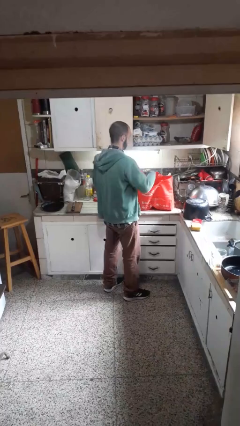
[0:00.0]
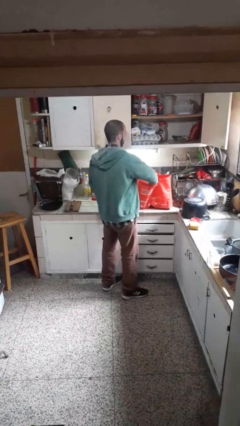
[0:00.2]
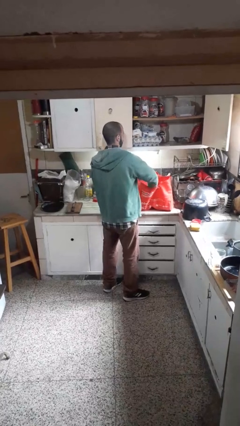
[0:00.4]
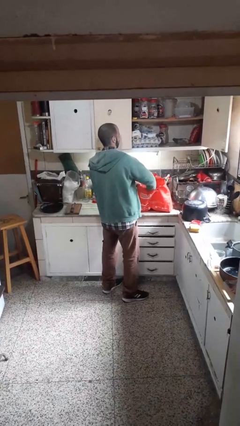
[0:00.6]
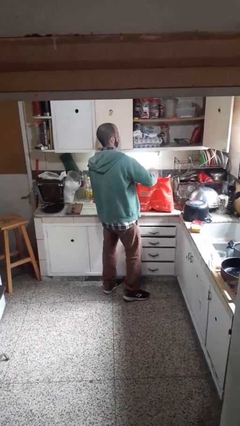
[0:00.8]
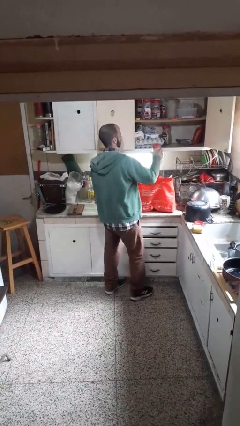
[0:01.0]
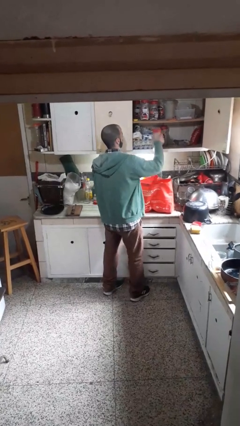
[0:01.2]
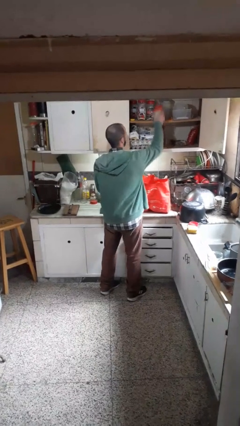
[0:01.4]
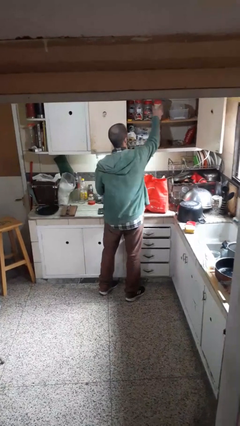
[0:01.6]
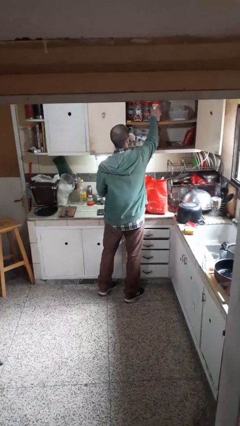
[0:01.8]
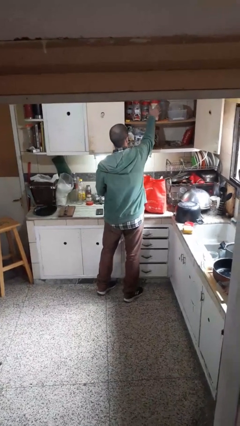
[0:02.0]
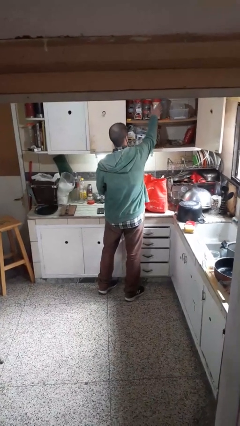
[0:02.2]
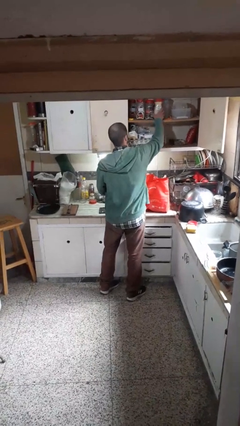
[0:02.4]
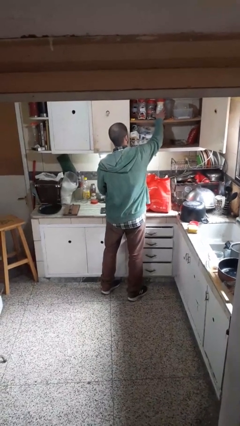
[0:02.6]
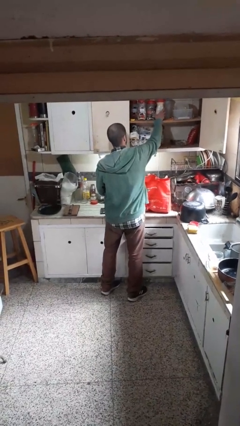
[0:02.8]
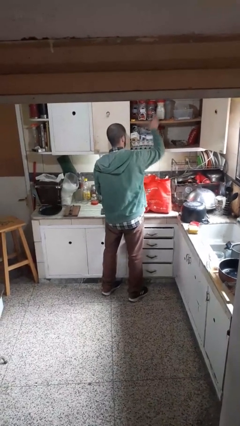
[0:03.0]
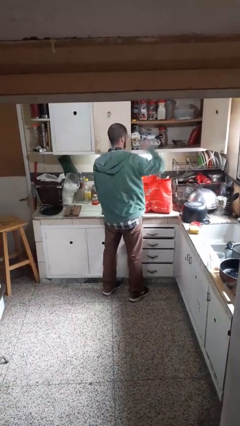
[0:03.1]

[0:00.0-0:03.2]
person loads groceries into cabinet

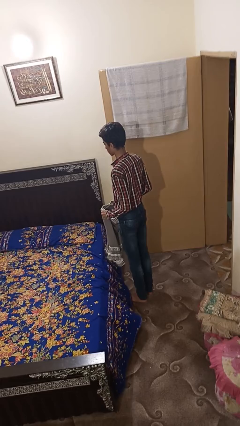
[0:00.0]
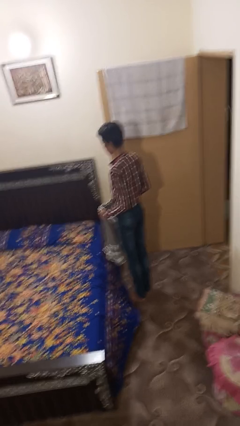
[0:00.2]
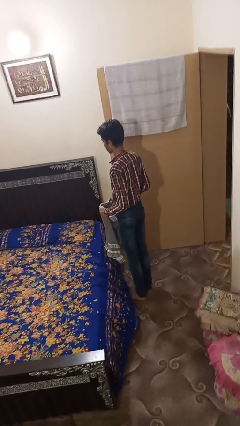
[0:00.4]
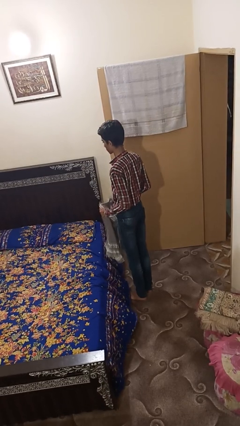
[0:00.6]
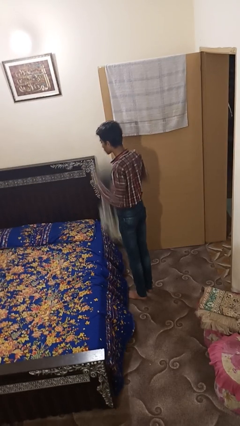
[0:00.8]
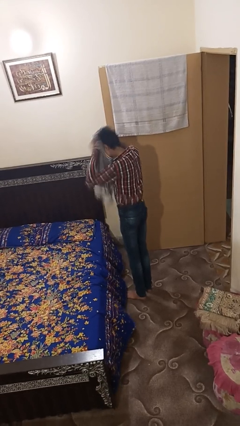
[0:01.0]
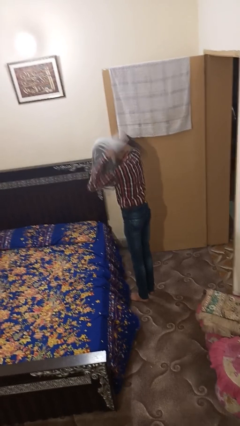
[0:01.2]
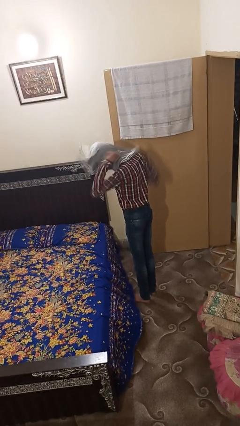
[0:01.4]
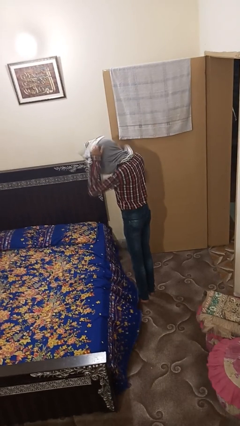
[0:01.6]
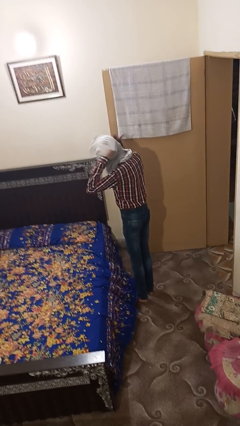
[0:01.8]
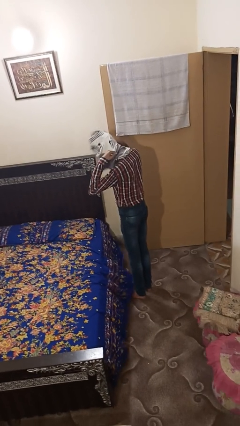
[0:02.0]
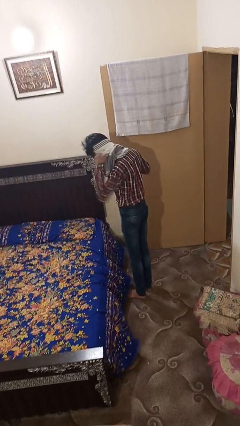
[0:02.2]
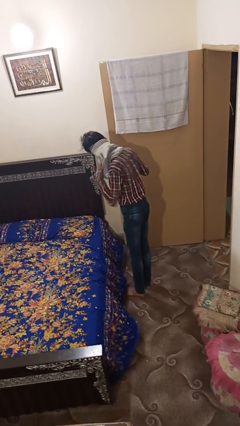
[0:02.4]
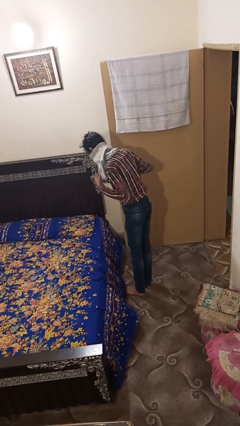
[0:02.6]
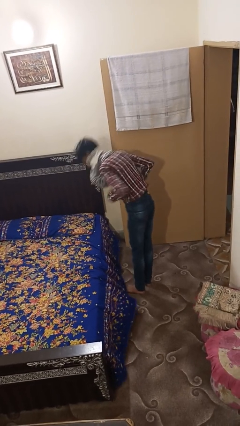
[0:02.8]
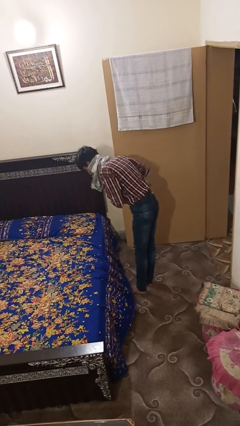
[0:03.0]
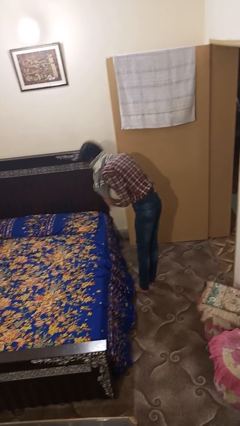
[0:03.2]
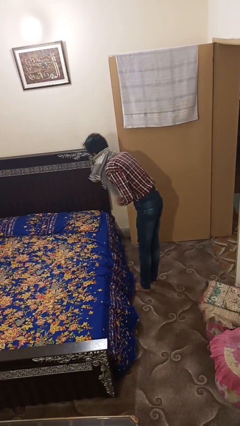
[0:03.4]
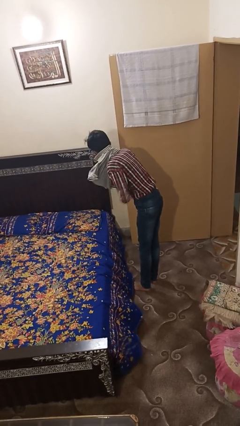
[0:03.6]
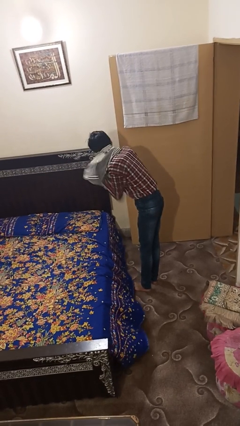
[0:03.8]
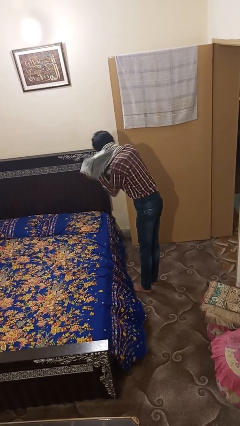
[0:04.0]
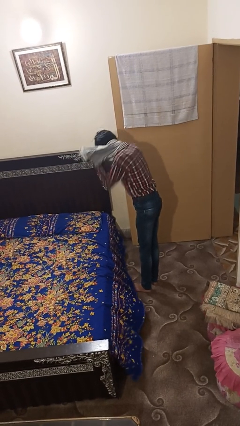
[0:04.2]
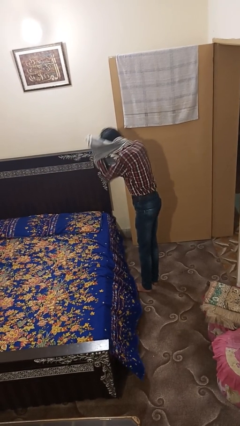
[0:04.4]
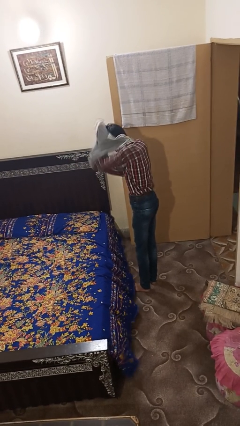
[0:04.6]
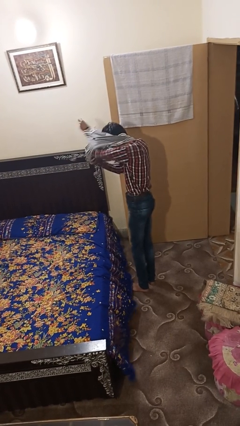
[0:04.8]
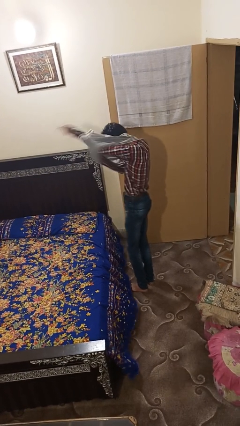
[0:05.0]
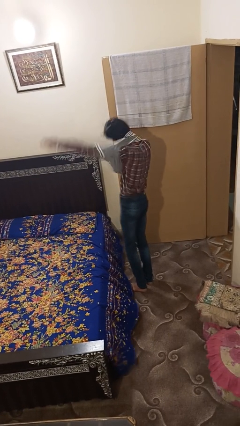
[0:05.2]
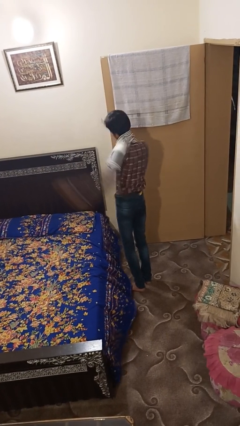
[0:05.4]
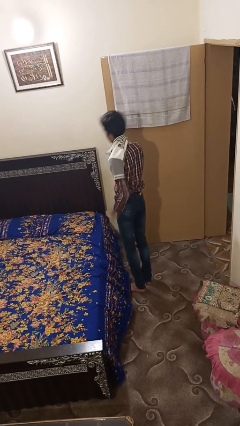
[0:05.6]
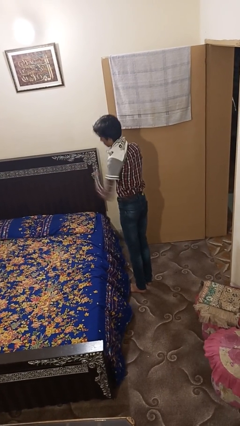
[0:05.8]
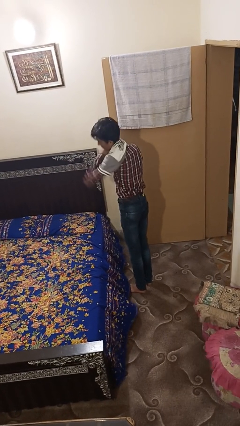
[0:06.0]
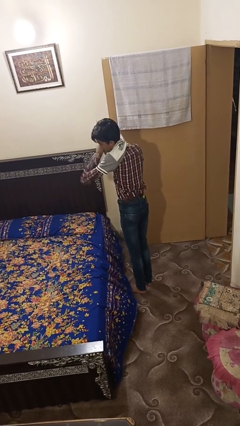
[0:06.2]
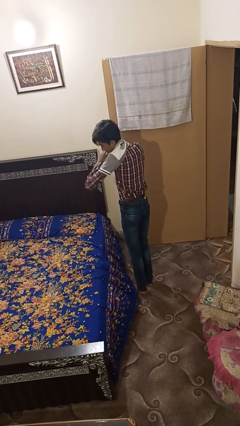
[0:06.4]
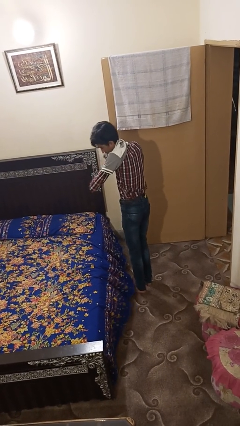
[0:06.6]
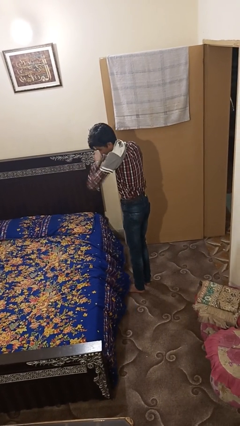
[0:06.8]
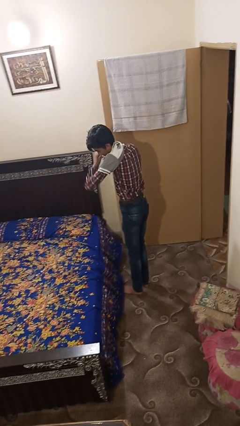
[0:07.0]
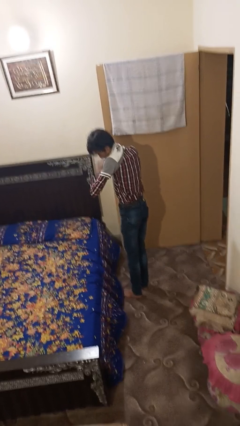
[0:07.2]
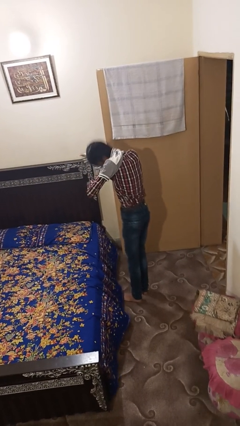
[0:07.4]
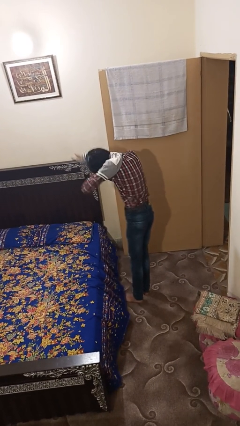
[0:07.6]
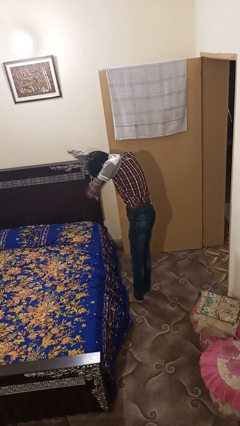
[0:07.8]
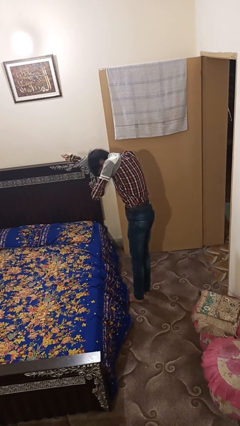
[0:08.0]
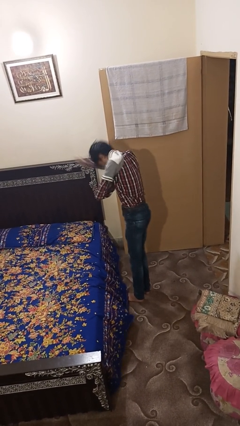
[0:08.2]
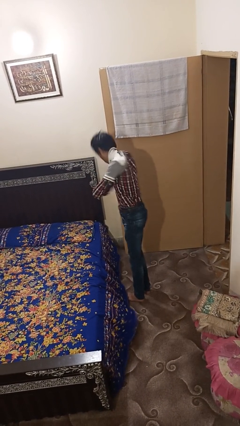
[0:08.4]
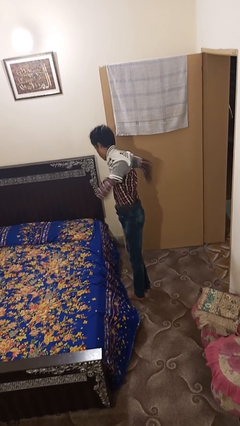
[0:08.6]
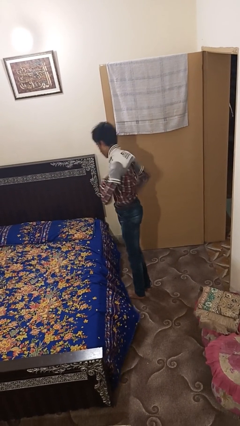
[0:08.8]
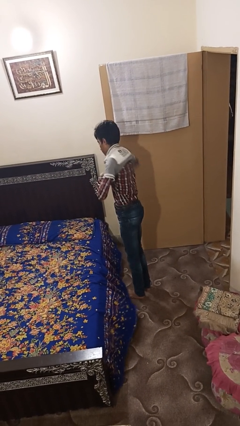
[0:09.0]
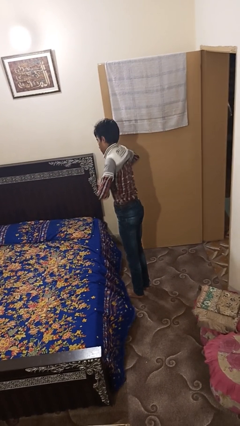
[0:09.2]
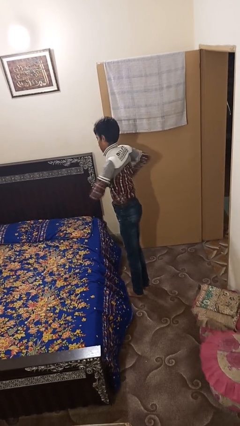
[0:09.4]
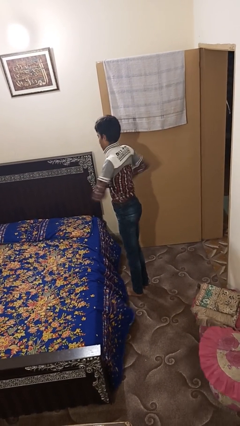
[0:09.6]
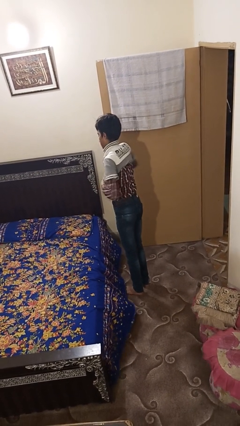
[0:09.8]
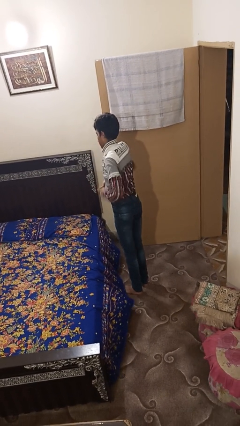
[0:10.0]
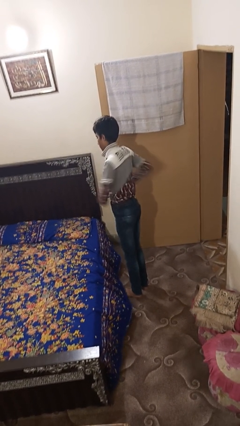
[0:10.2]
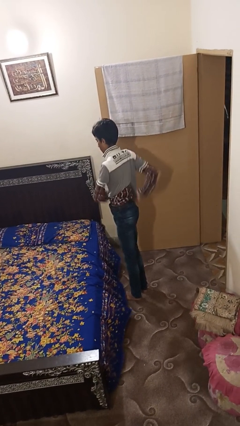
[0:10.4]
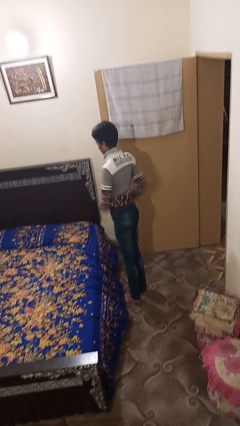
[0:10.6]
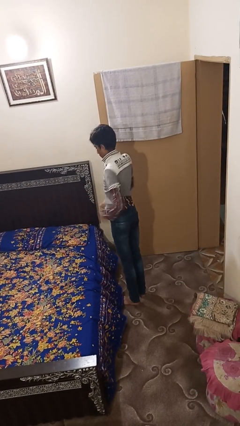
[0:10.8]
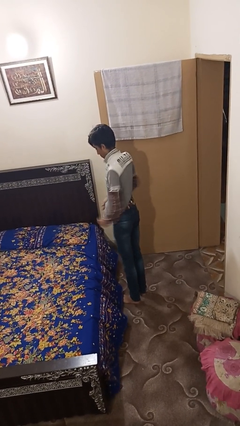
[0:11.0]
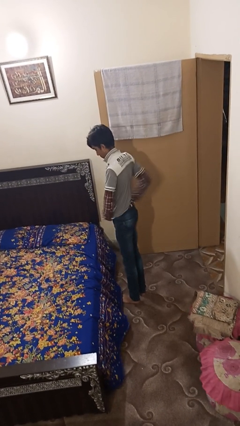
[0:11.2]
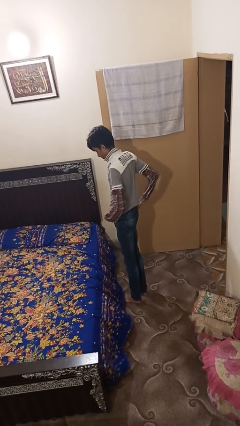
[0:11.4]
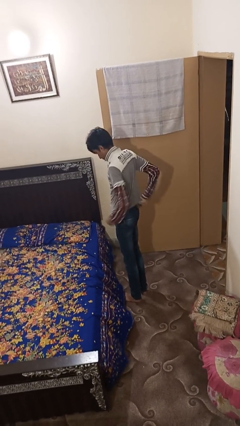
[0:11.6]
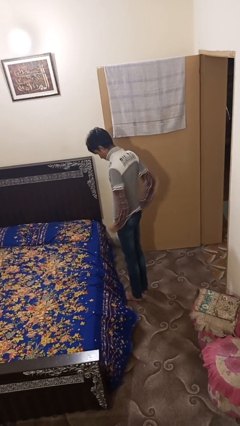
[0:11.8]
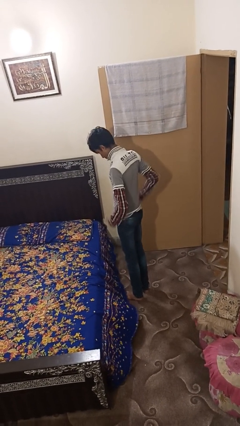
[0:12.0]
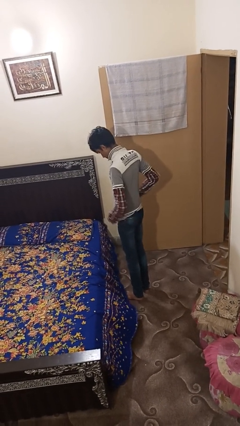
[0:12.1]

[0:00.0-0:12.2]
person puts on shirt

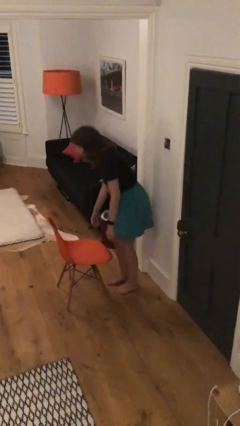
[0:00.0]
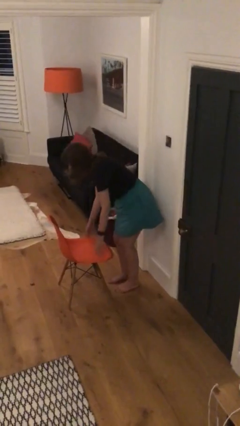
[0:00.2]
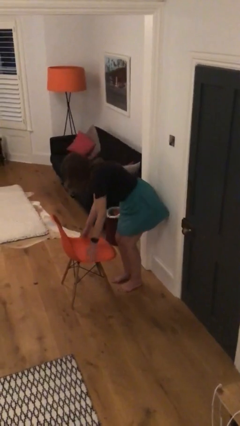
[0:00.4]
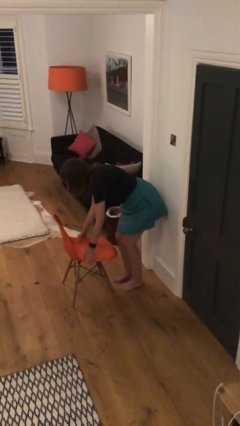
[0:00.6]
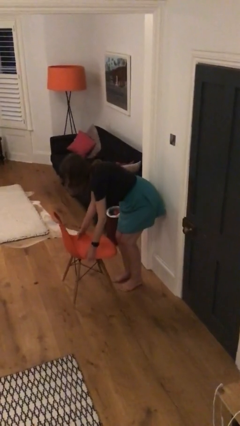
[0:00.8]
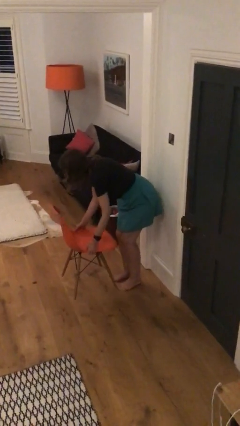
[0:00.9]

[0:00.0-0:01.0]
person picks up object from floor

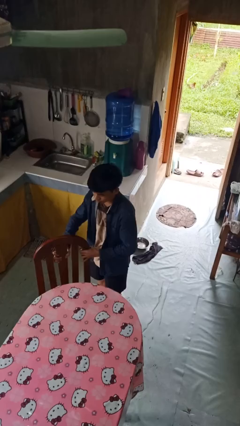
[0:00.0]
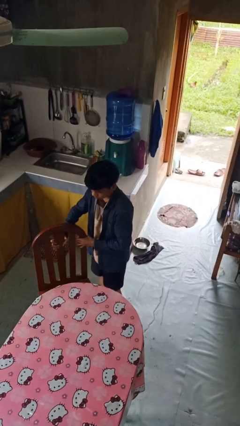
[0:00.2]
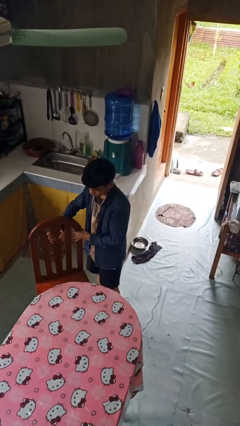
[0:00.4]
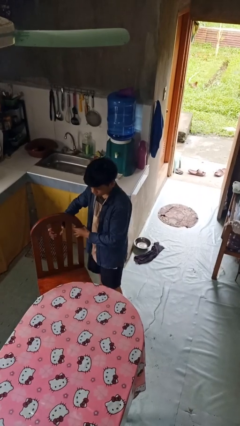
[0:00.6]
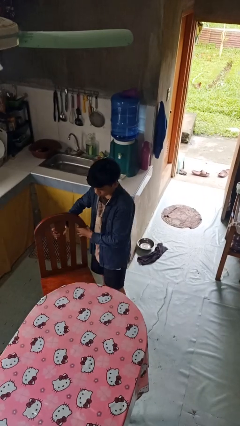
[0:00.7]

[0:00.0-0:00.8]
person pulls out chair

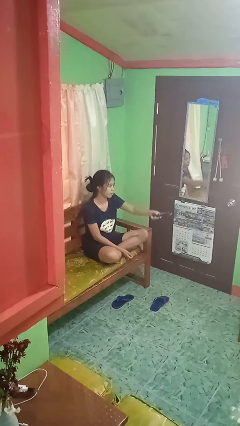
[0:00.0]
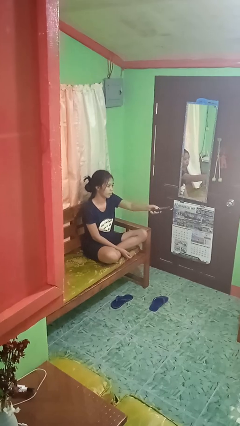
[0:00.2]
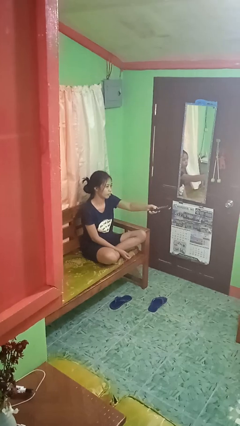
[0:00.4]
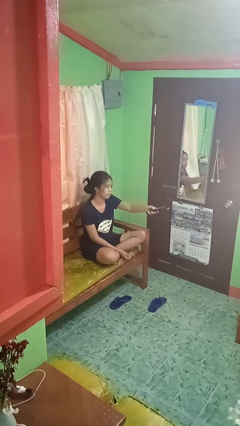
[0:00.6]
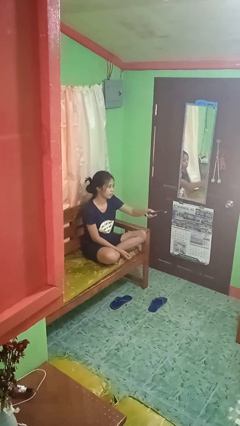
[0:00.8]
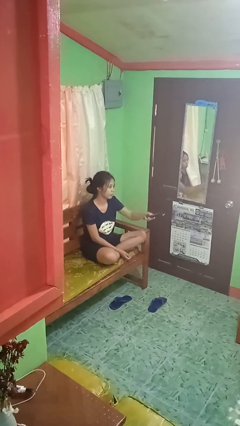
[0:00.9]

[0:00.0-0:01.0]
person uses television remote
